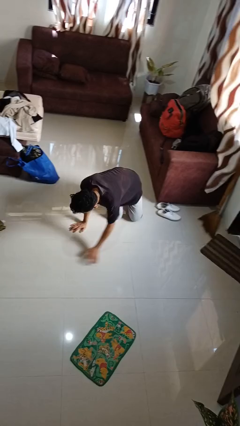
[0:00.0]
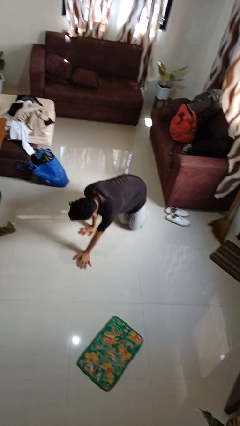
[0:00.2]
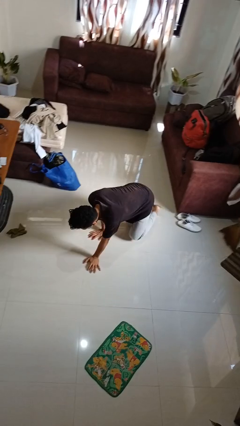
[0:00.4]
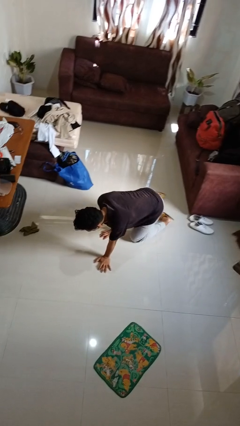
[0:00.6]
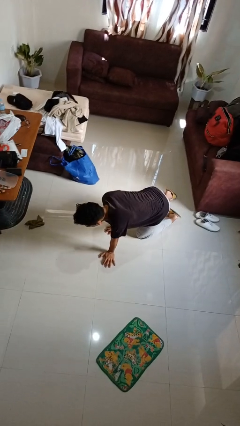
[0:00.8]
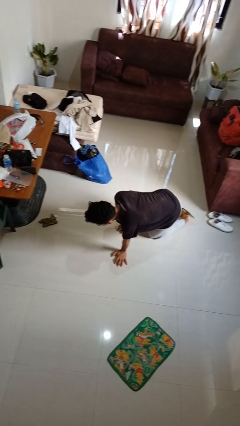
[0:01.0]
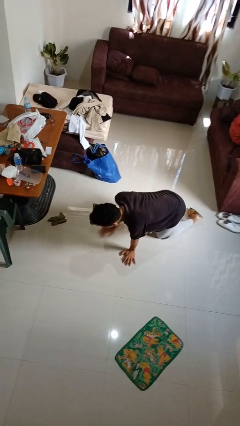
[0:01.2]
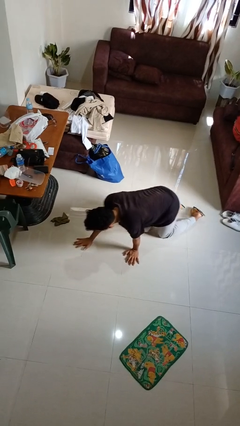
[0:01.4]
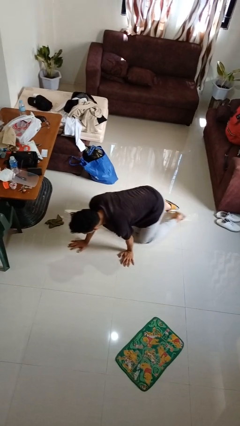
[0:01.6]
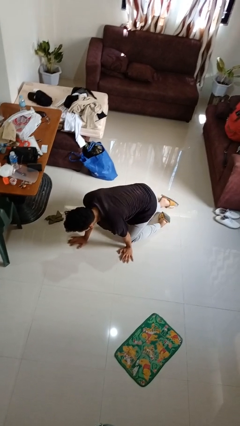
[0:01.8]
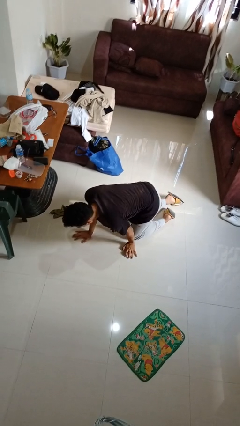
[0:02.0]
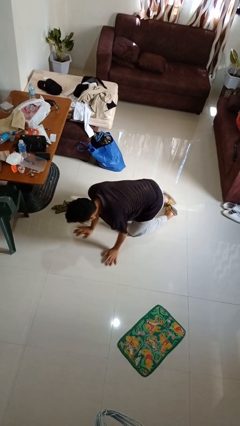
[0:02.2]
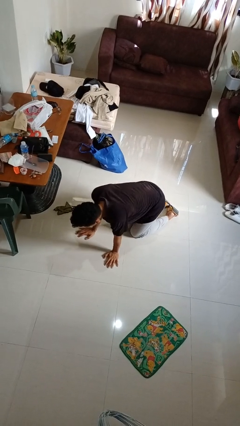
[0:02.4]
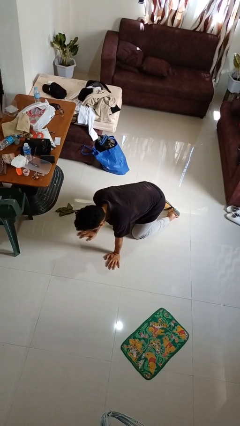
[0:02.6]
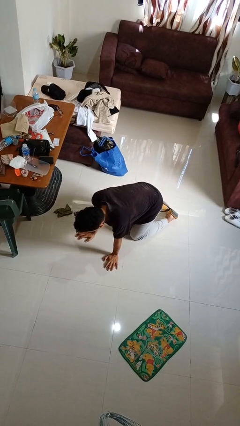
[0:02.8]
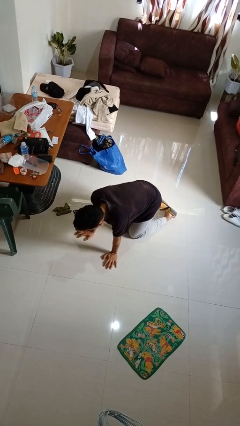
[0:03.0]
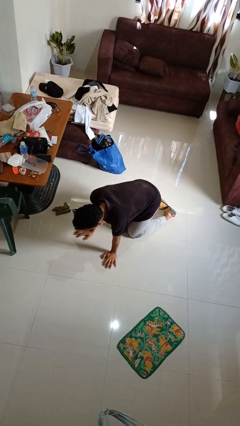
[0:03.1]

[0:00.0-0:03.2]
person crawls

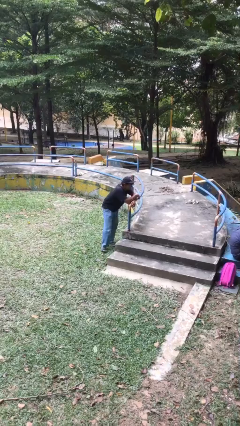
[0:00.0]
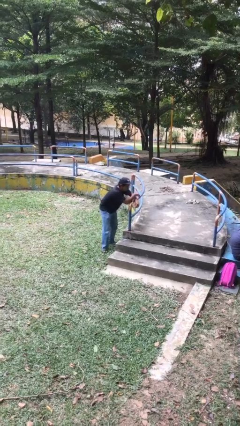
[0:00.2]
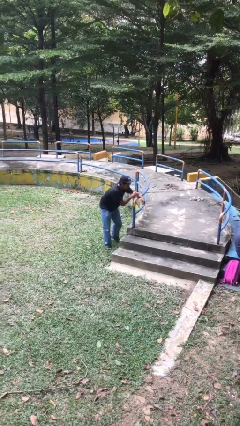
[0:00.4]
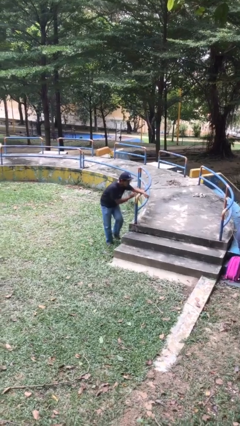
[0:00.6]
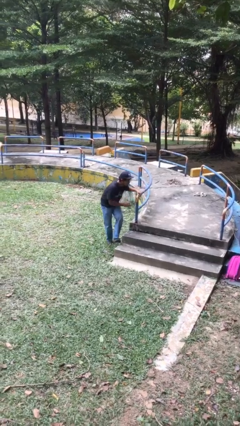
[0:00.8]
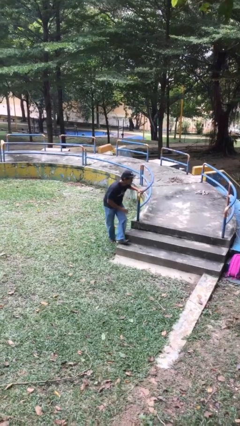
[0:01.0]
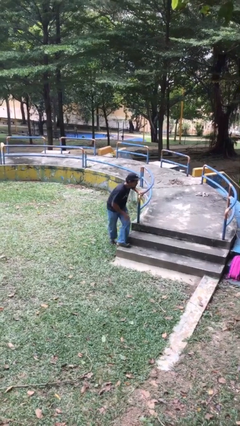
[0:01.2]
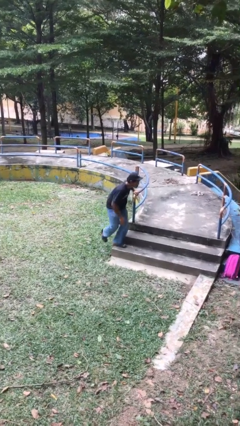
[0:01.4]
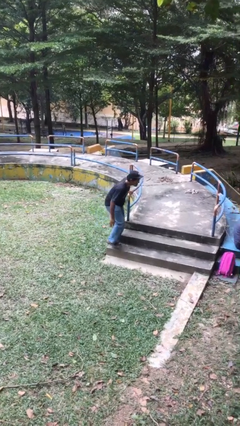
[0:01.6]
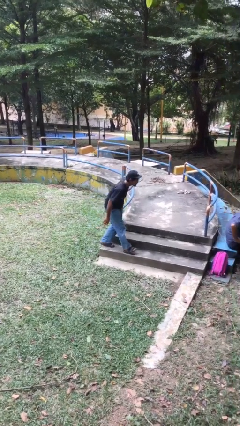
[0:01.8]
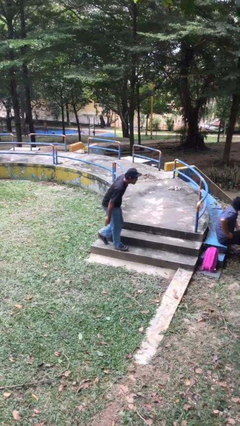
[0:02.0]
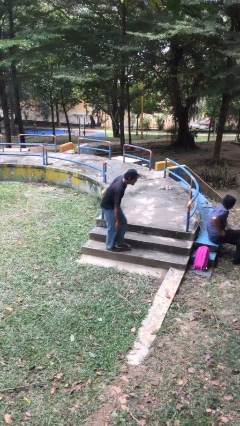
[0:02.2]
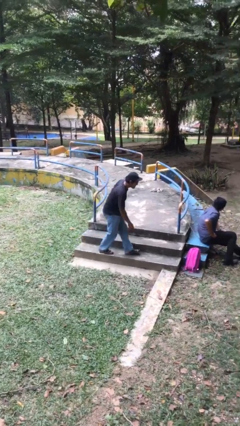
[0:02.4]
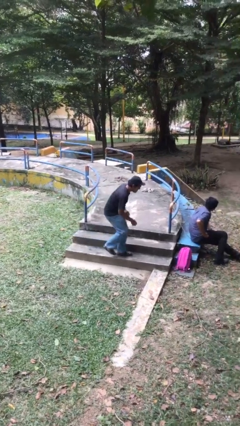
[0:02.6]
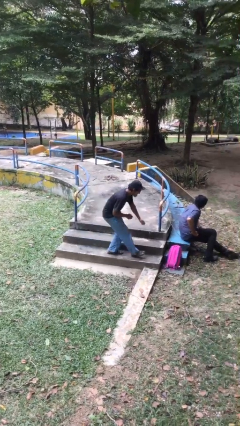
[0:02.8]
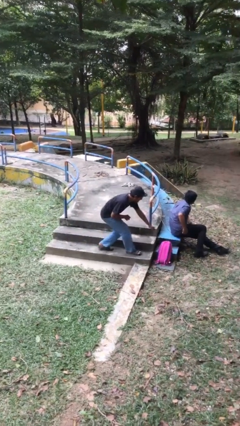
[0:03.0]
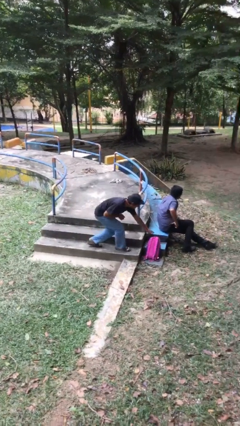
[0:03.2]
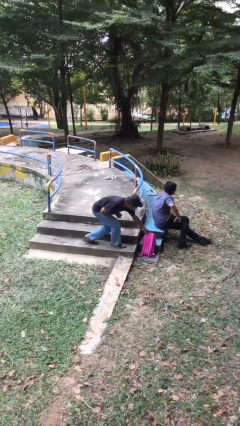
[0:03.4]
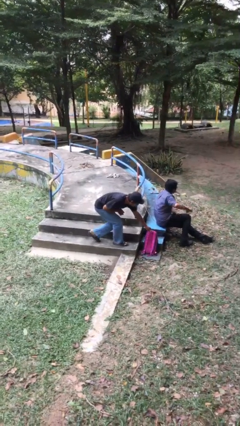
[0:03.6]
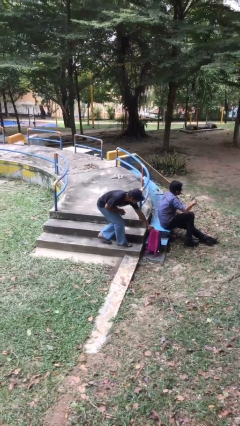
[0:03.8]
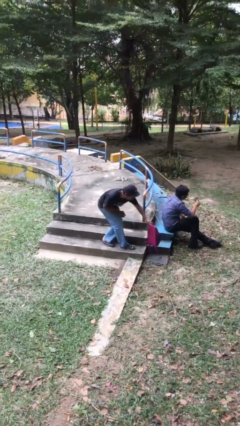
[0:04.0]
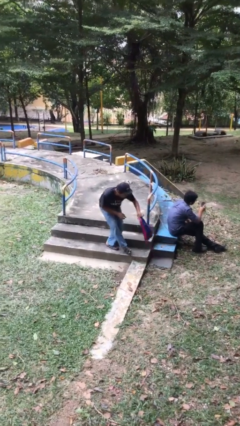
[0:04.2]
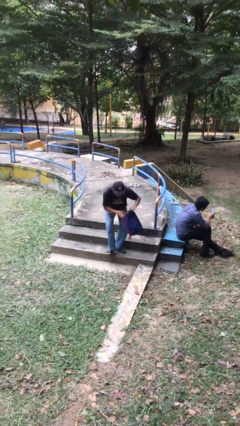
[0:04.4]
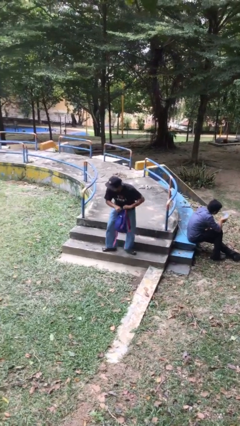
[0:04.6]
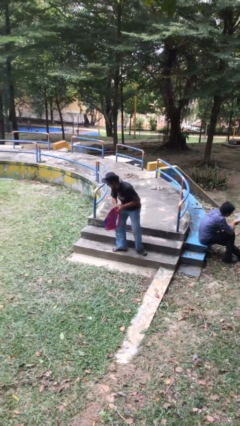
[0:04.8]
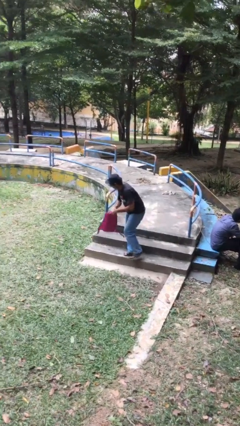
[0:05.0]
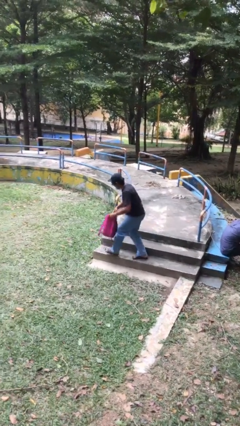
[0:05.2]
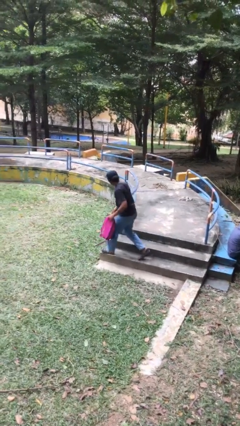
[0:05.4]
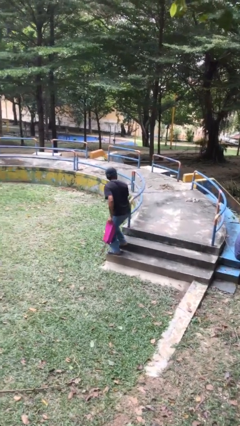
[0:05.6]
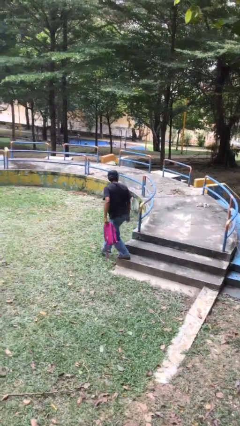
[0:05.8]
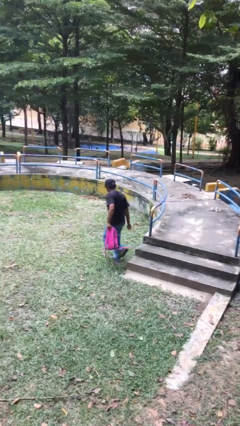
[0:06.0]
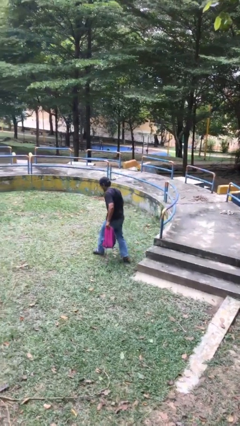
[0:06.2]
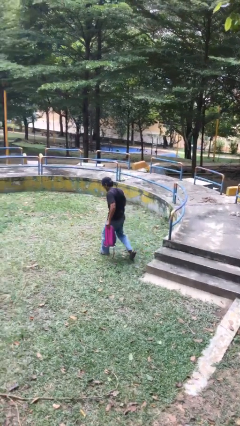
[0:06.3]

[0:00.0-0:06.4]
person steals object from person

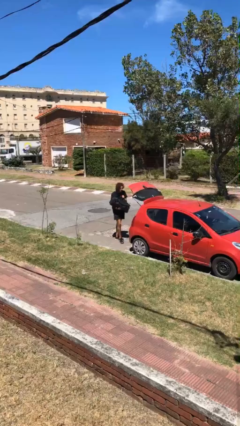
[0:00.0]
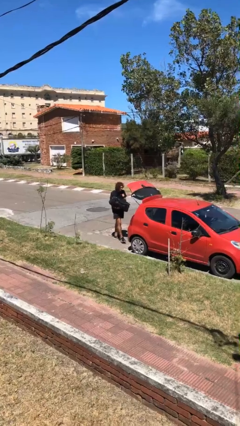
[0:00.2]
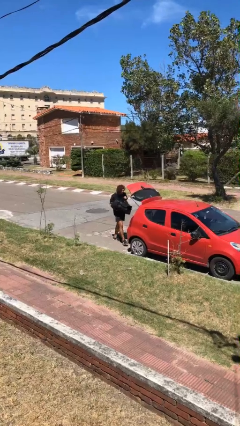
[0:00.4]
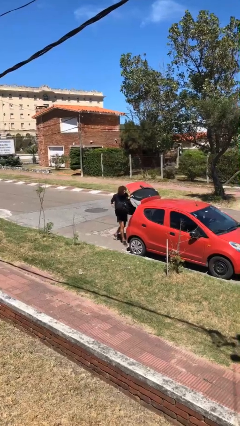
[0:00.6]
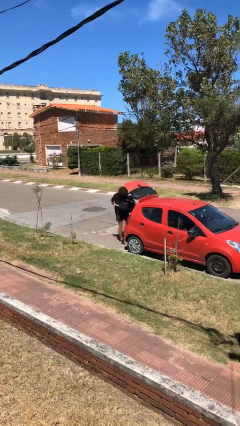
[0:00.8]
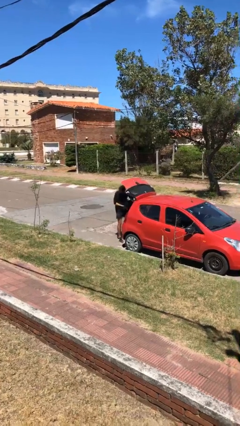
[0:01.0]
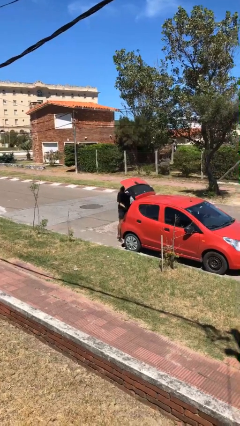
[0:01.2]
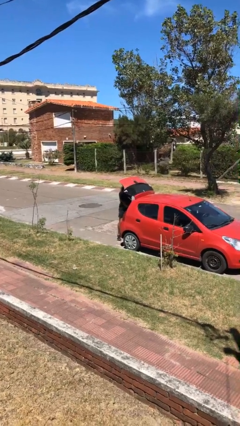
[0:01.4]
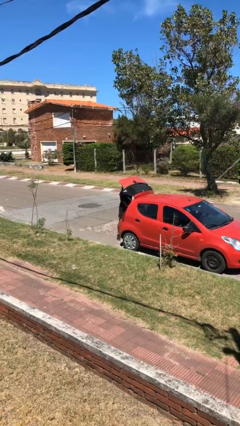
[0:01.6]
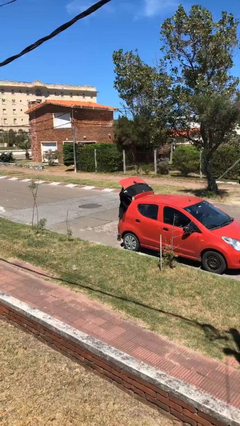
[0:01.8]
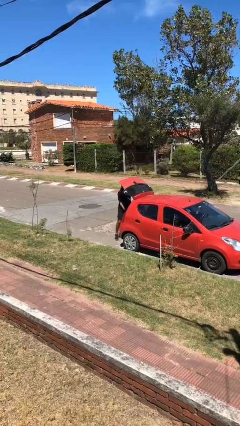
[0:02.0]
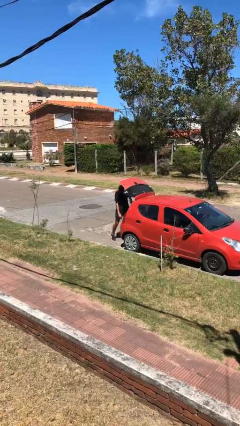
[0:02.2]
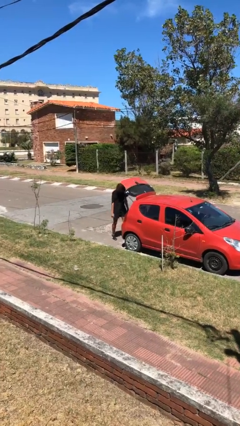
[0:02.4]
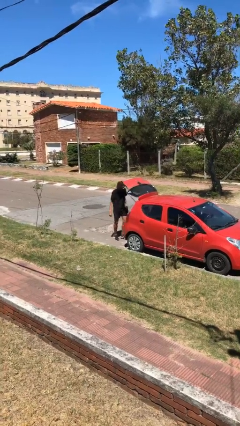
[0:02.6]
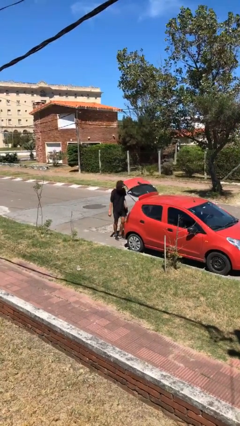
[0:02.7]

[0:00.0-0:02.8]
person loads car

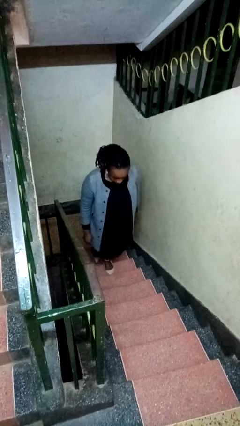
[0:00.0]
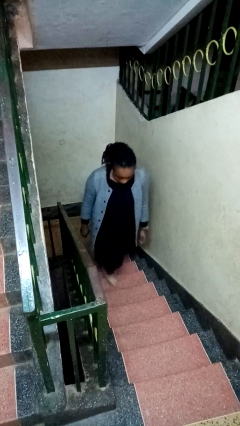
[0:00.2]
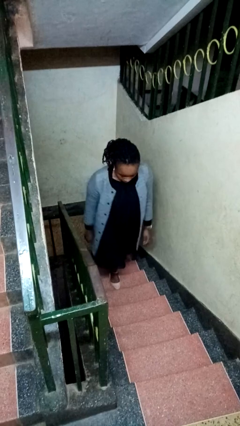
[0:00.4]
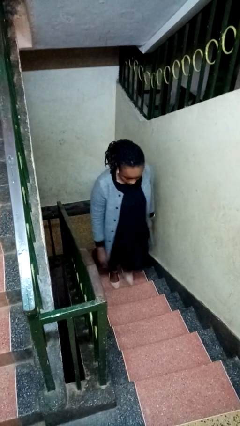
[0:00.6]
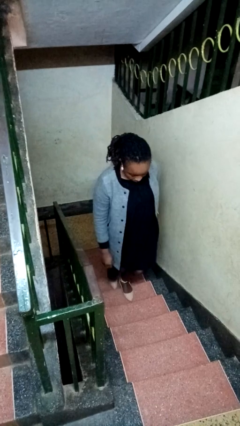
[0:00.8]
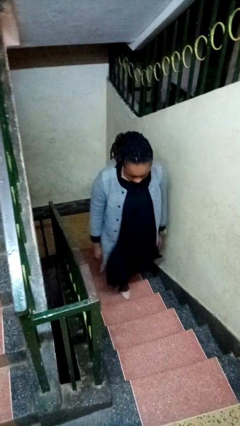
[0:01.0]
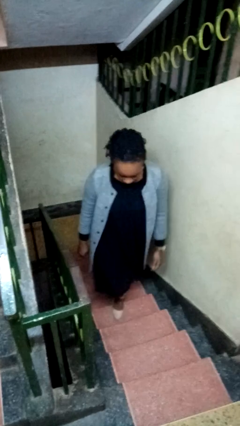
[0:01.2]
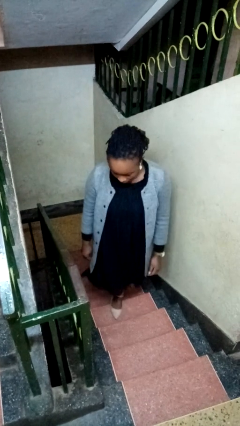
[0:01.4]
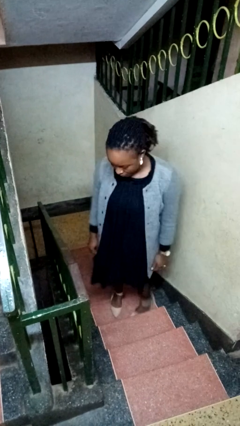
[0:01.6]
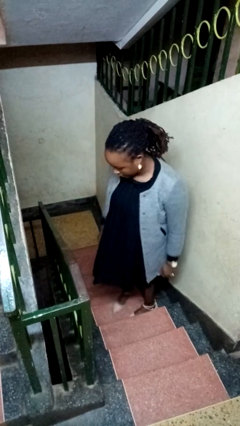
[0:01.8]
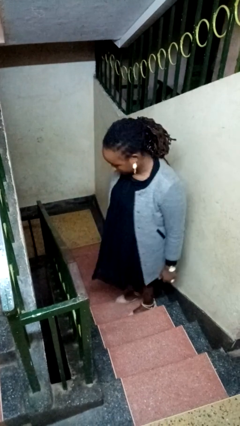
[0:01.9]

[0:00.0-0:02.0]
person climbs up stairs

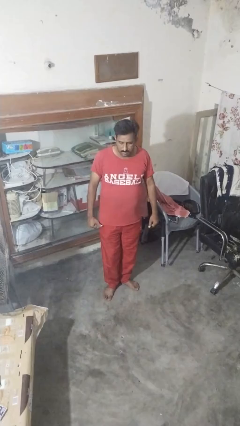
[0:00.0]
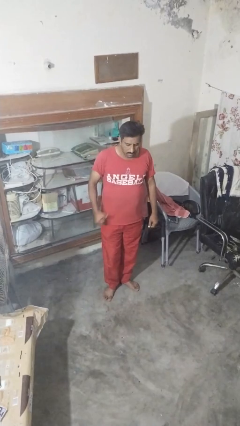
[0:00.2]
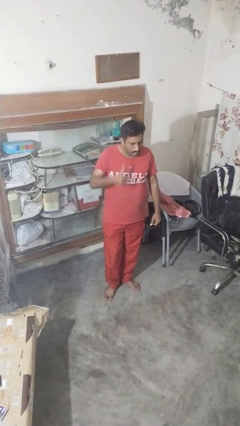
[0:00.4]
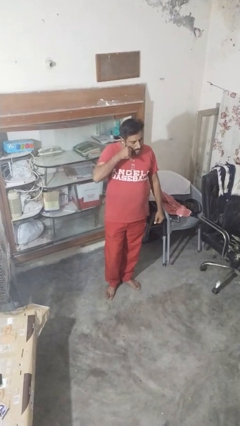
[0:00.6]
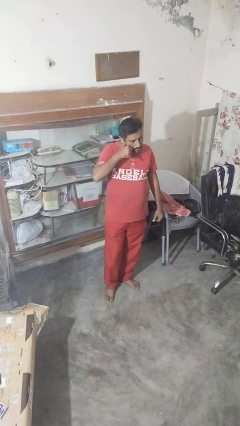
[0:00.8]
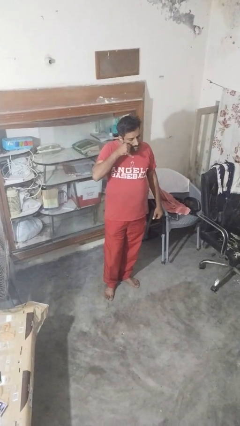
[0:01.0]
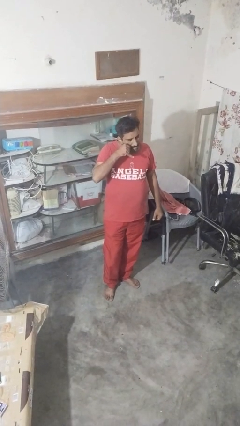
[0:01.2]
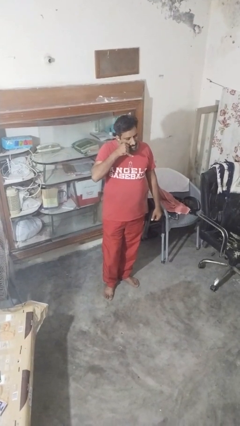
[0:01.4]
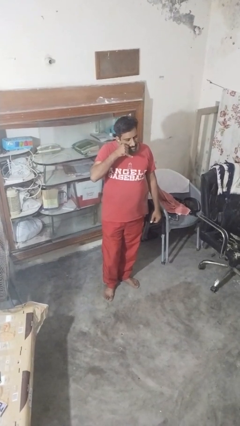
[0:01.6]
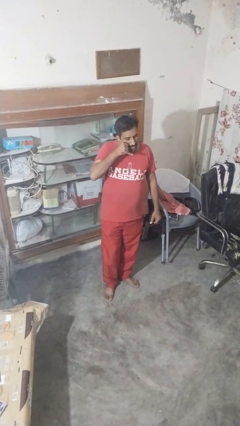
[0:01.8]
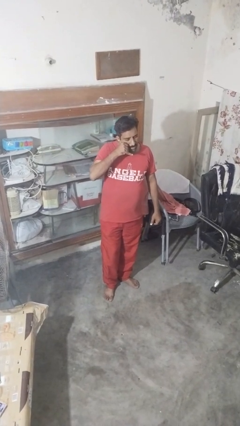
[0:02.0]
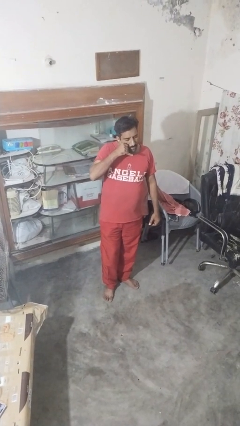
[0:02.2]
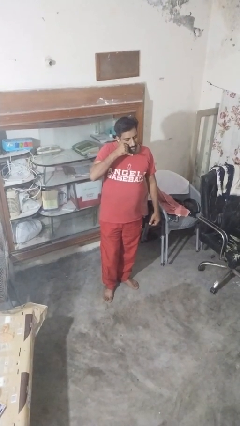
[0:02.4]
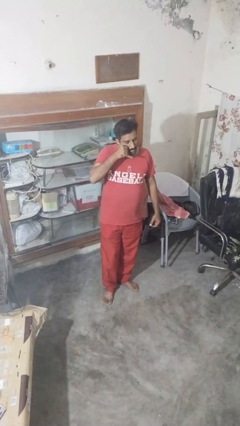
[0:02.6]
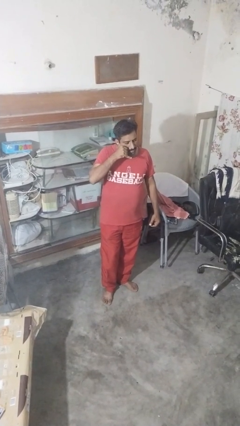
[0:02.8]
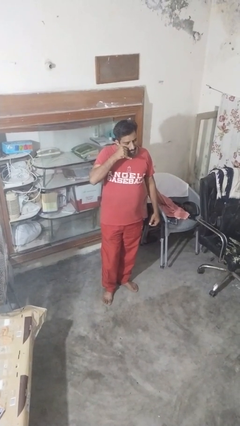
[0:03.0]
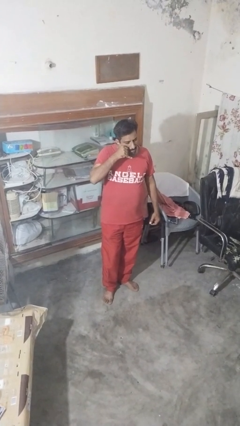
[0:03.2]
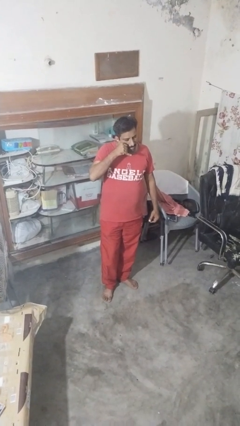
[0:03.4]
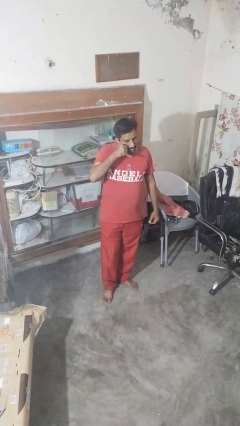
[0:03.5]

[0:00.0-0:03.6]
person gestures call me
